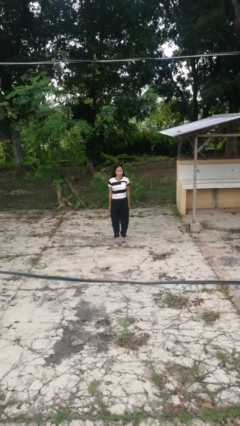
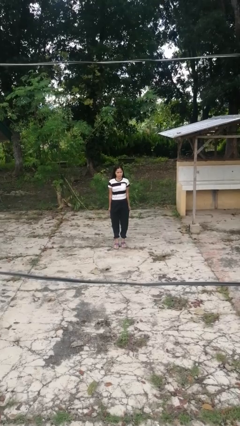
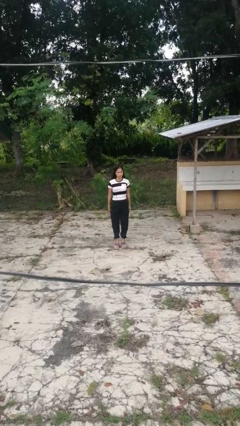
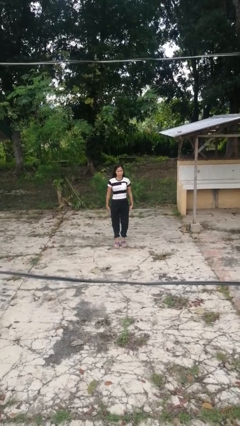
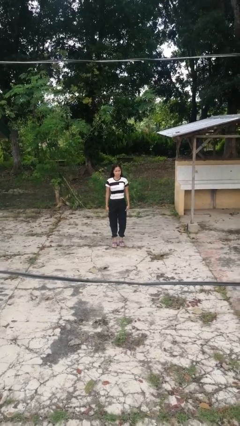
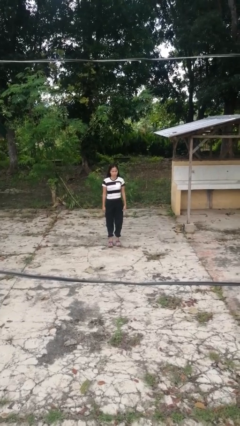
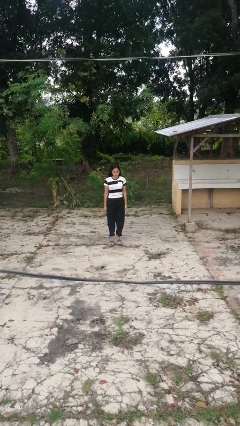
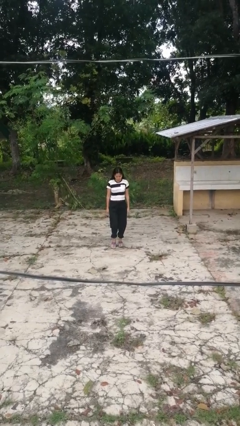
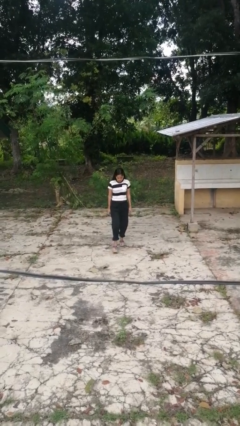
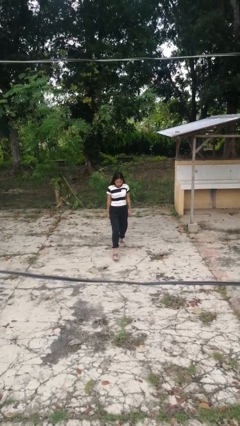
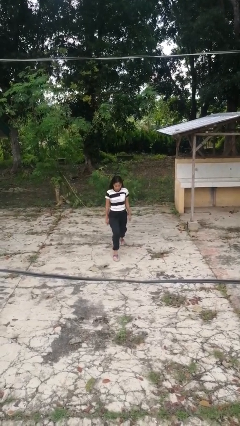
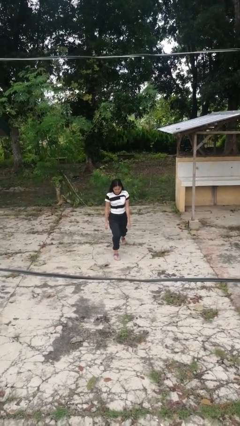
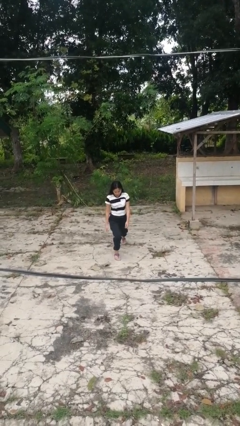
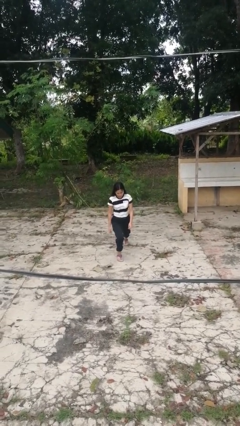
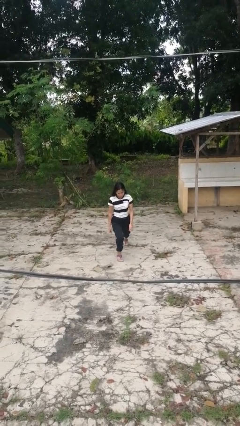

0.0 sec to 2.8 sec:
person exercises with lunges

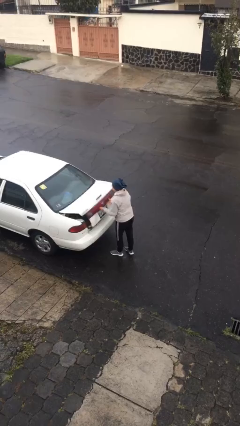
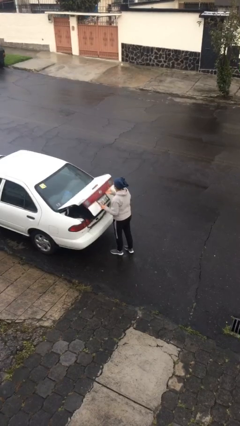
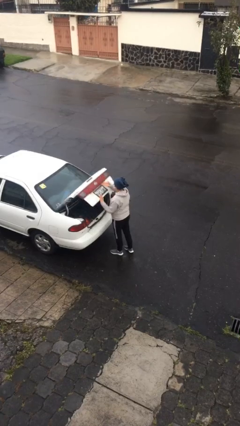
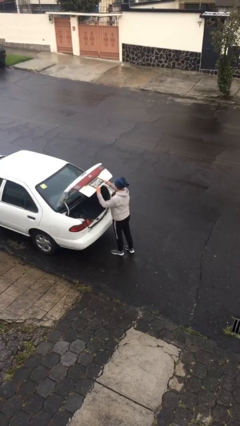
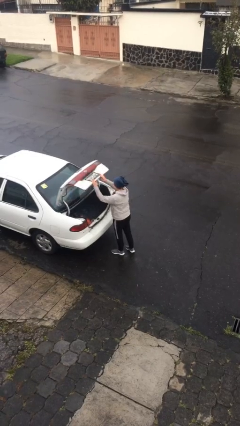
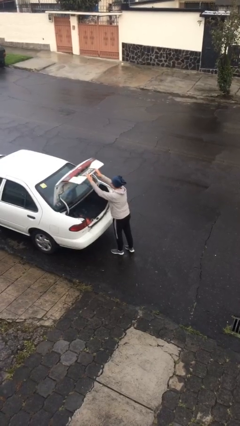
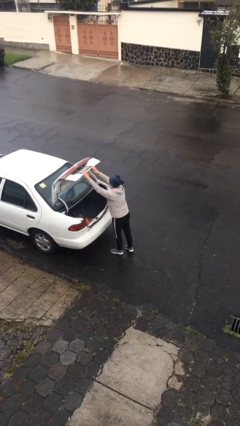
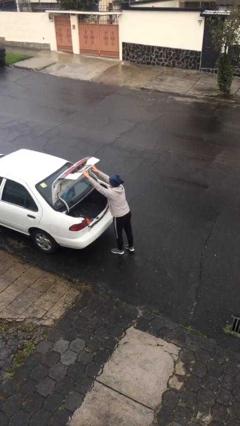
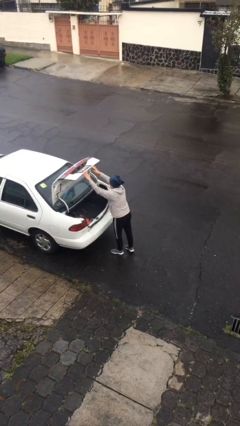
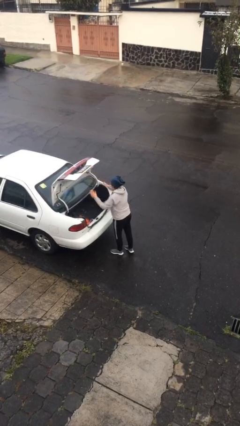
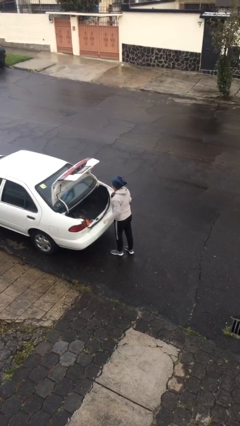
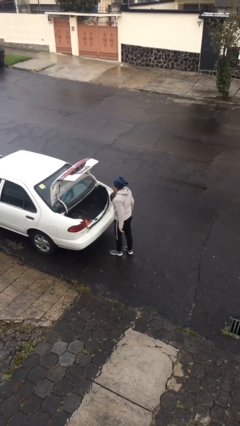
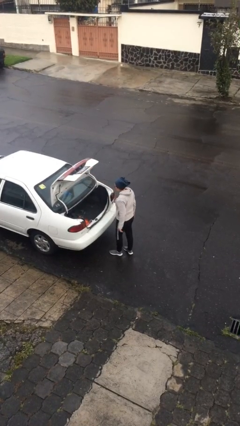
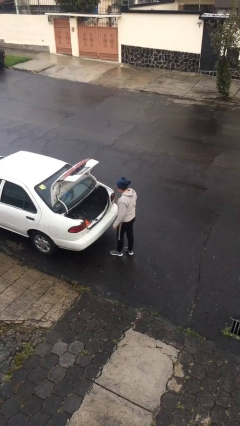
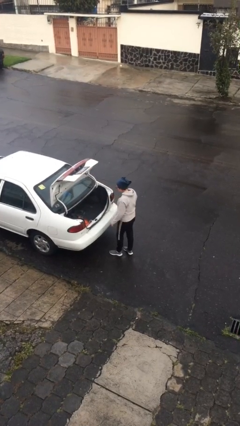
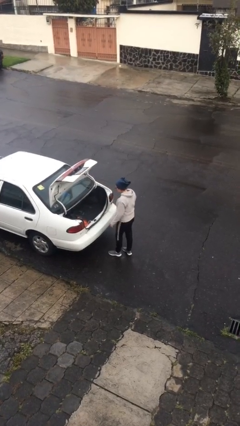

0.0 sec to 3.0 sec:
person opens car trunk

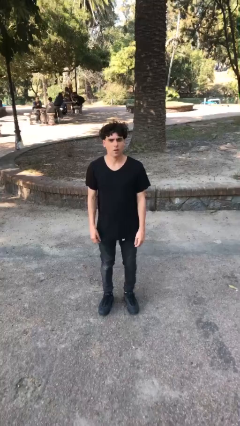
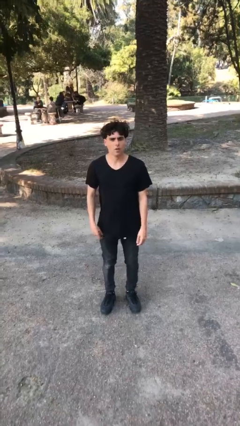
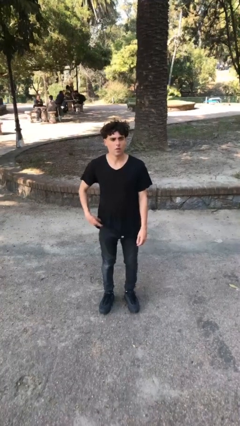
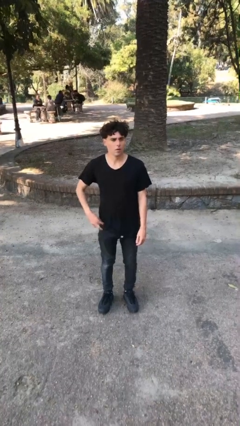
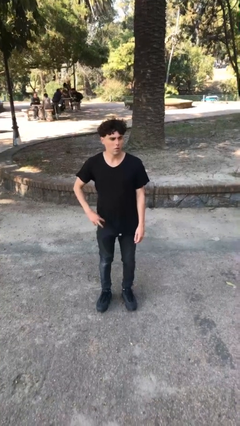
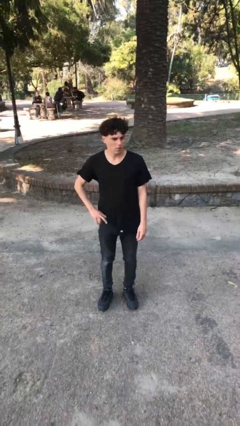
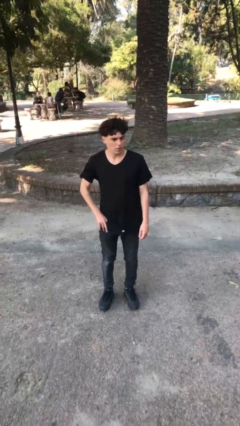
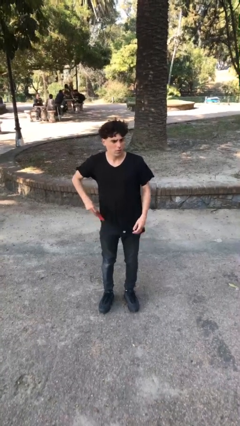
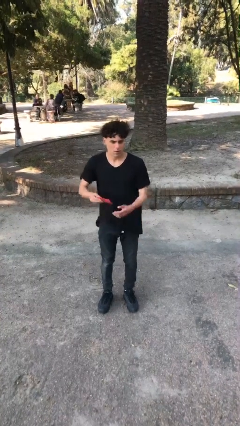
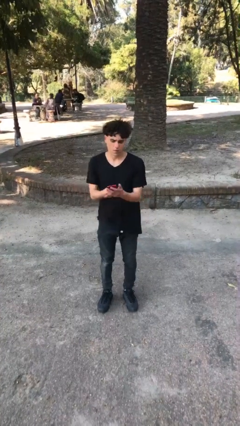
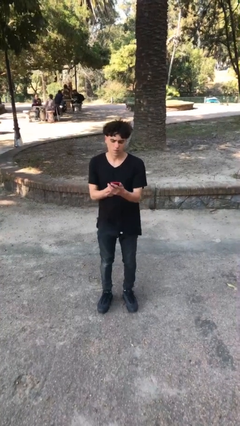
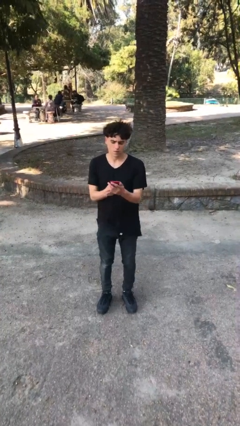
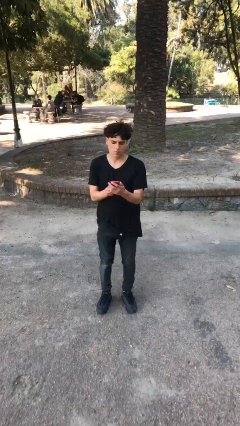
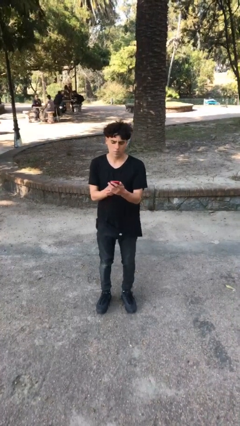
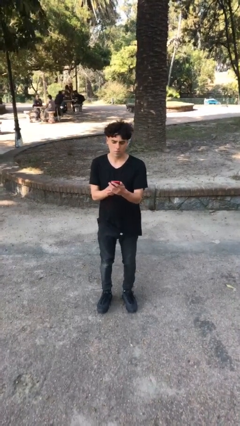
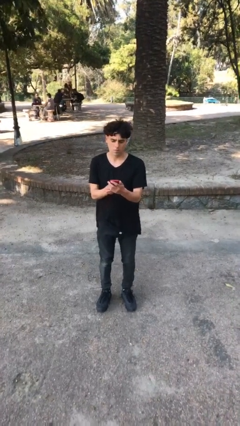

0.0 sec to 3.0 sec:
person takes phone from pocket

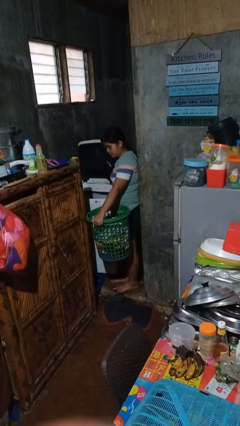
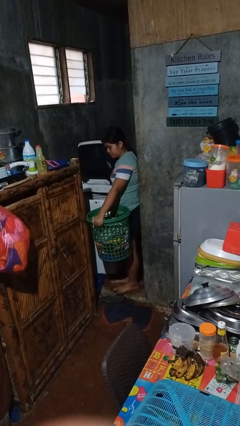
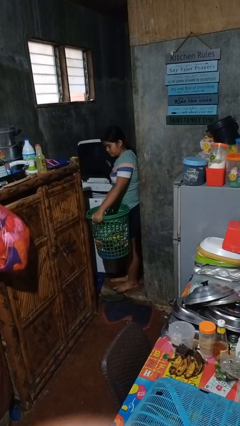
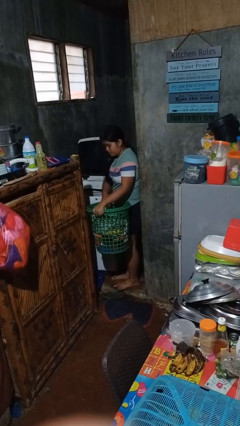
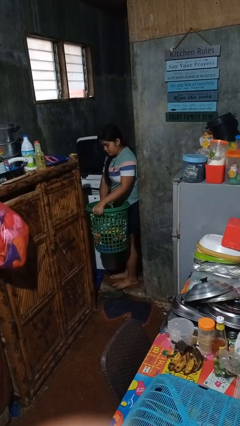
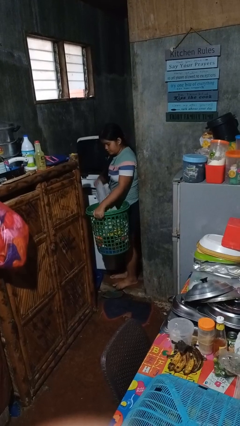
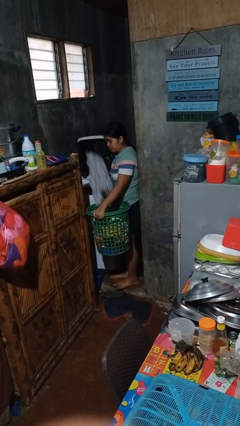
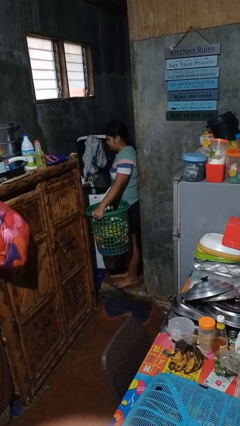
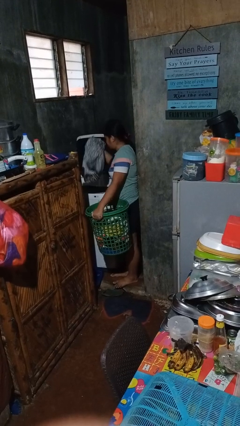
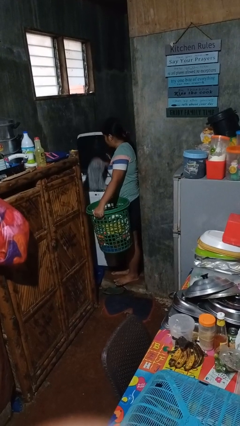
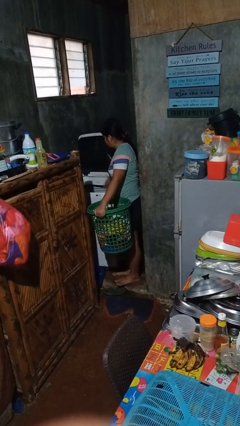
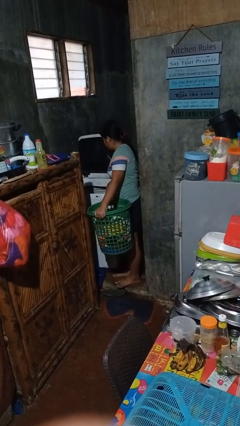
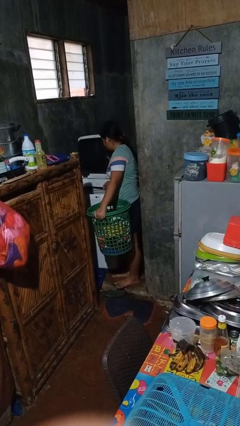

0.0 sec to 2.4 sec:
person loads clotheswasher

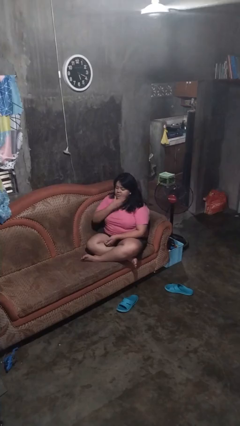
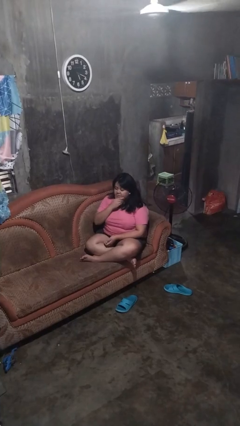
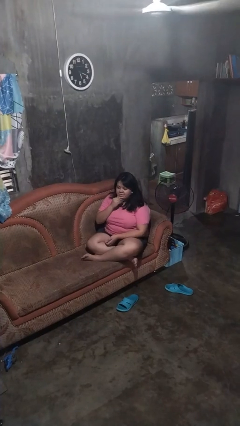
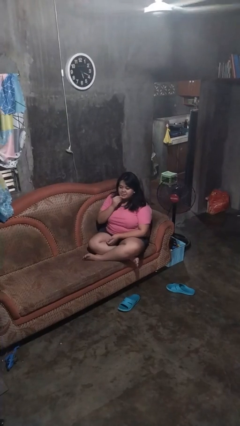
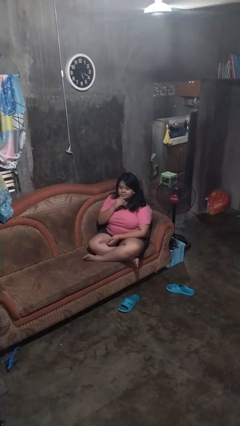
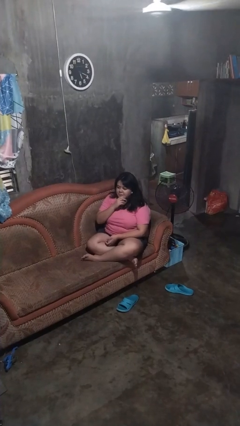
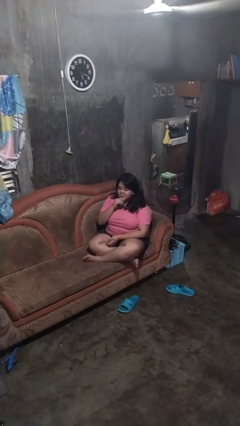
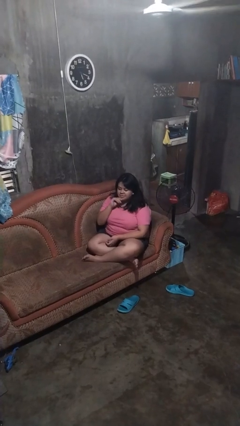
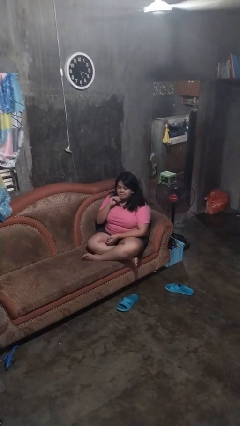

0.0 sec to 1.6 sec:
person strokes chin

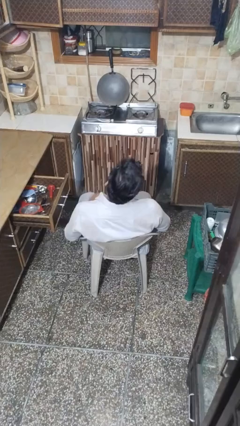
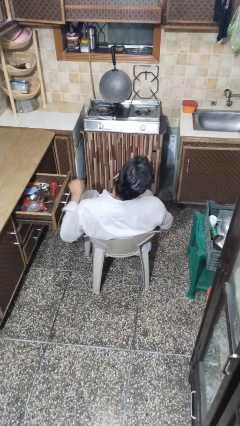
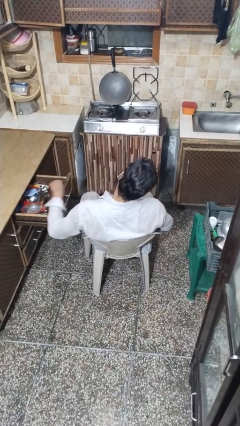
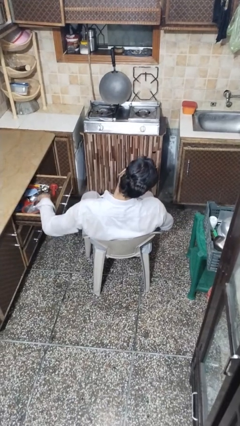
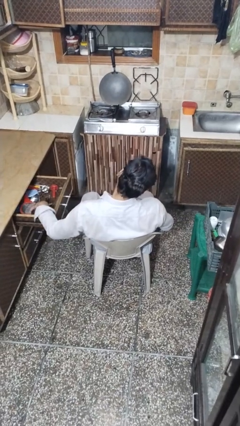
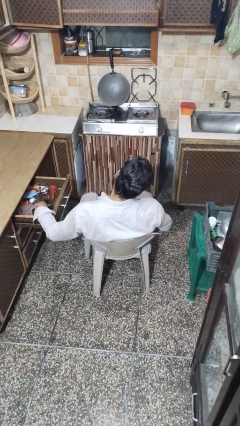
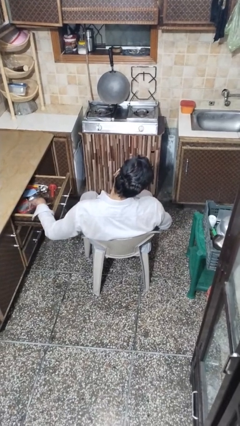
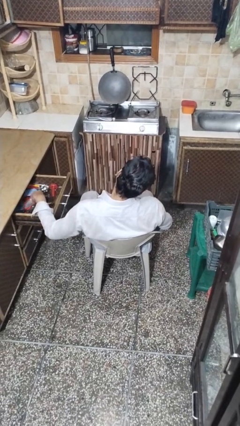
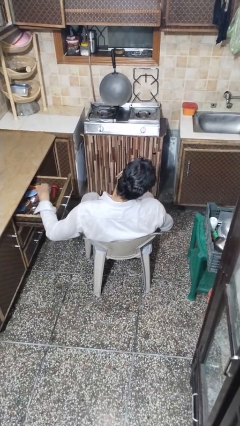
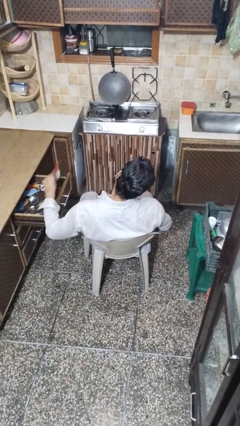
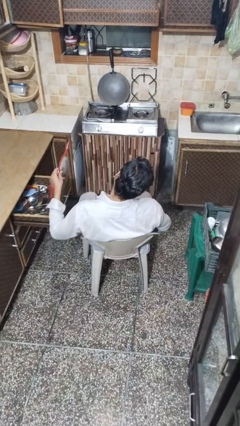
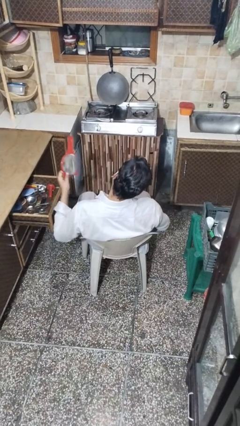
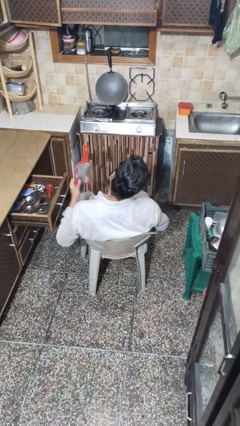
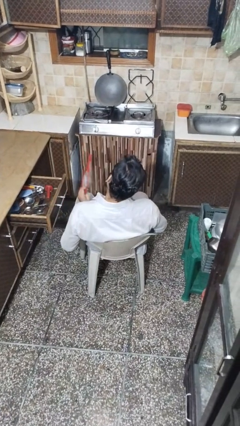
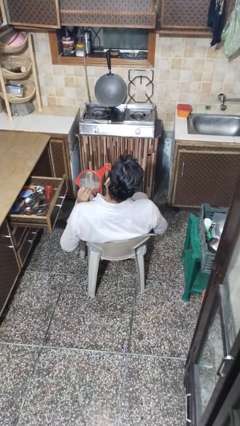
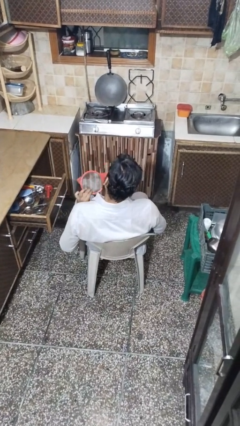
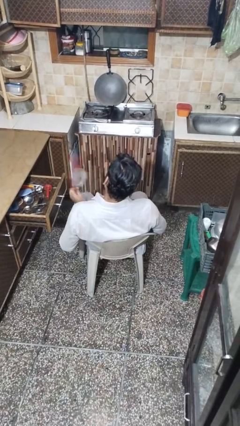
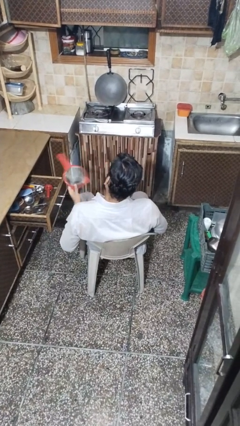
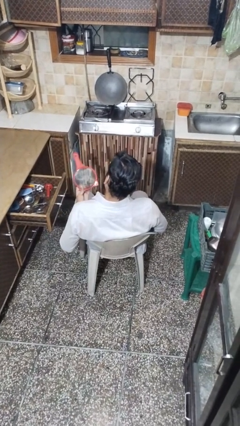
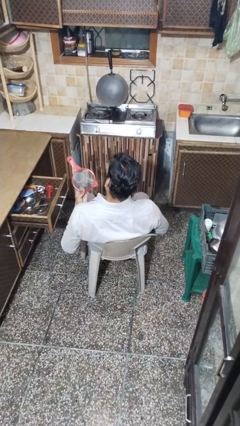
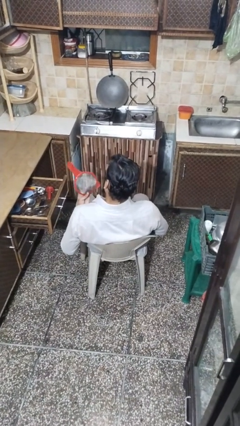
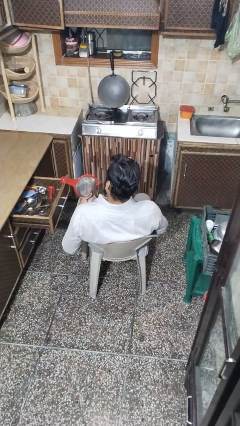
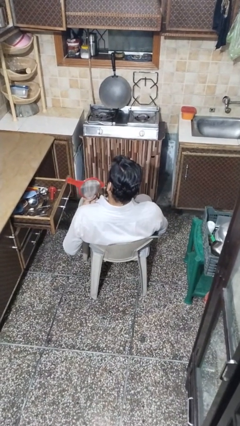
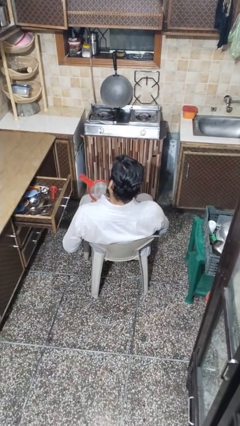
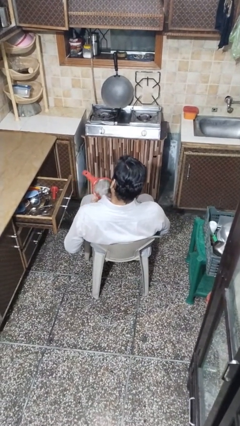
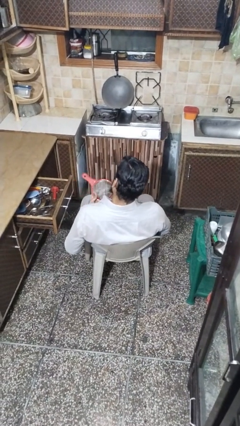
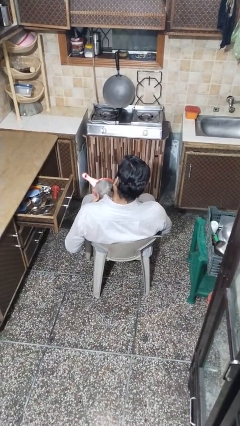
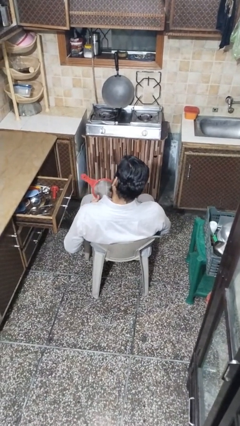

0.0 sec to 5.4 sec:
person takes object from kitchen drawer
